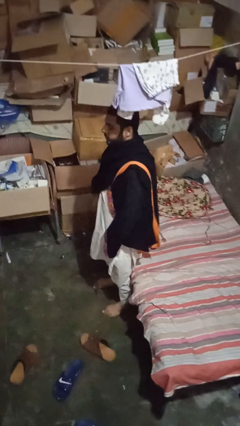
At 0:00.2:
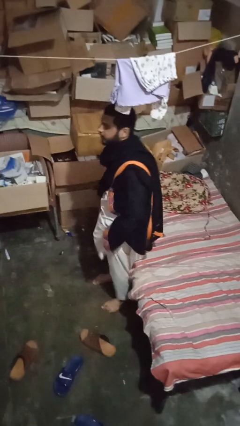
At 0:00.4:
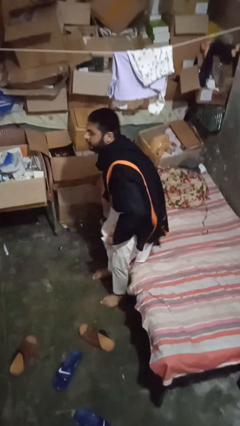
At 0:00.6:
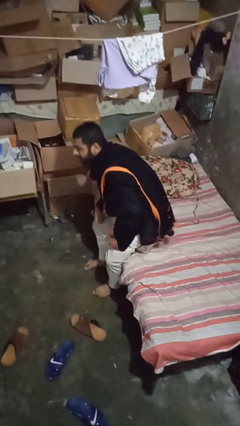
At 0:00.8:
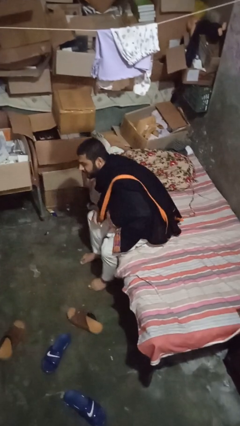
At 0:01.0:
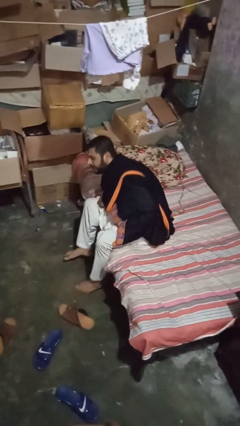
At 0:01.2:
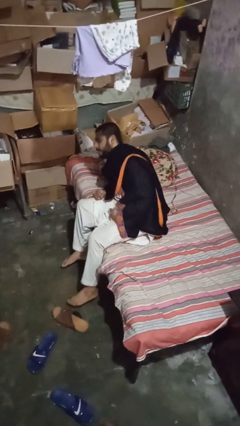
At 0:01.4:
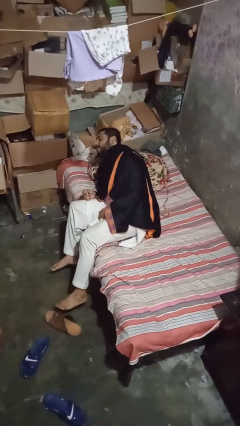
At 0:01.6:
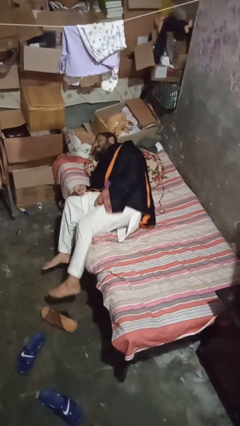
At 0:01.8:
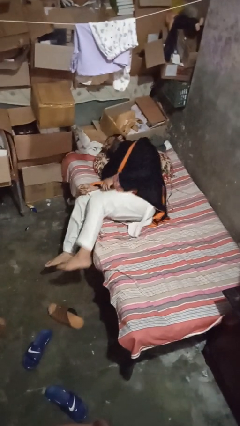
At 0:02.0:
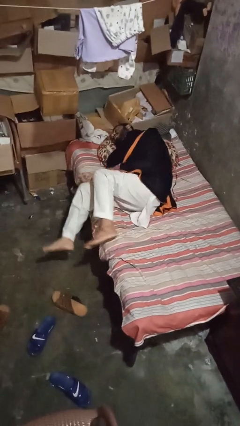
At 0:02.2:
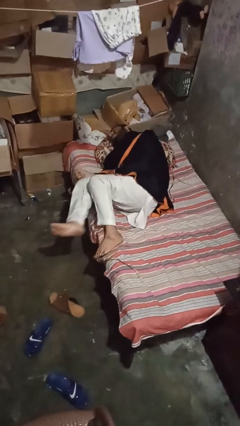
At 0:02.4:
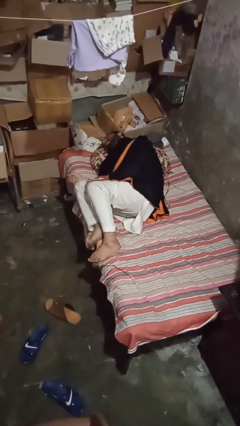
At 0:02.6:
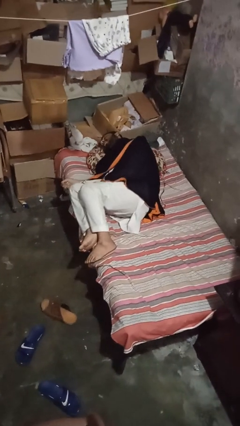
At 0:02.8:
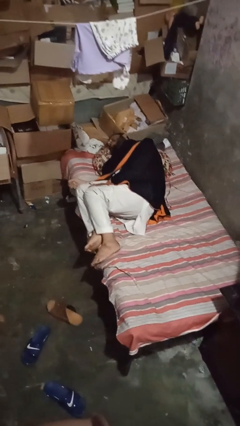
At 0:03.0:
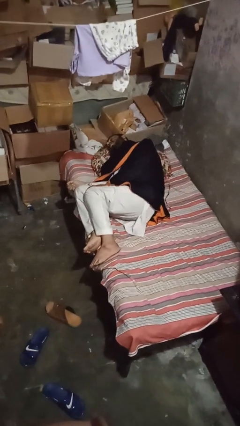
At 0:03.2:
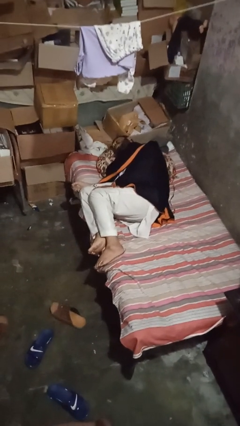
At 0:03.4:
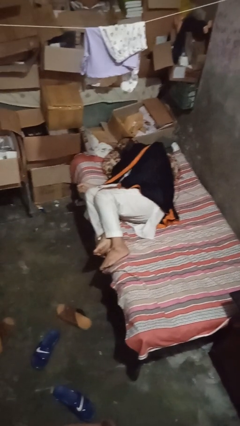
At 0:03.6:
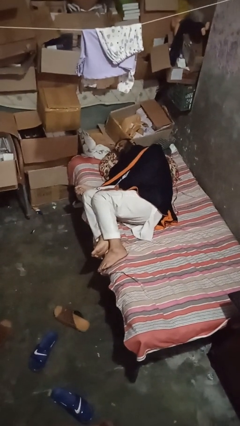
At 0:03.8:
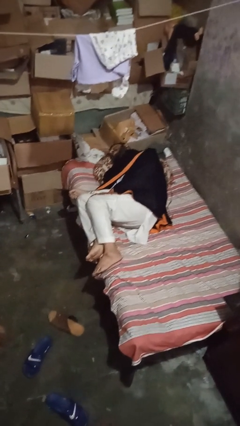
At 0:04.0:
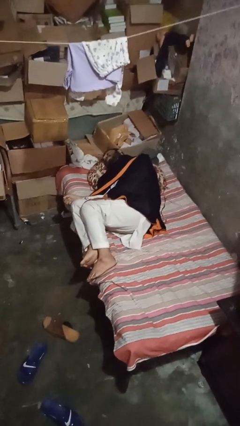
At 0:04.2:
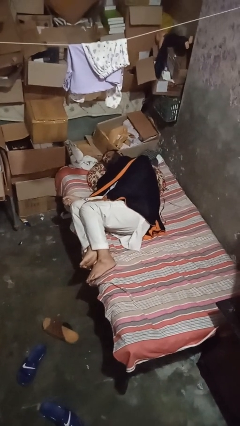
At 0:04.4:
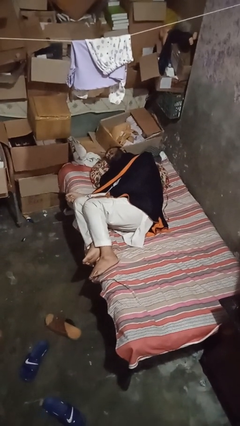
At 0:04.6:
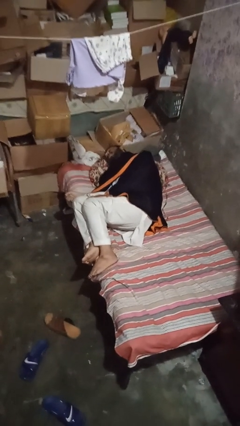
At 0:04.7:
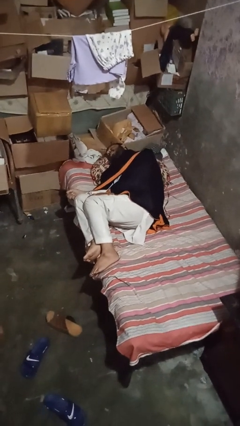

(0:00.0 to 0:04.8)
person lies down on bed

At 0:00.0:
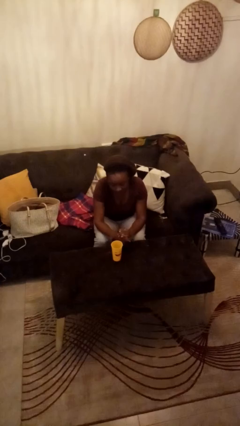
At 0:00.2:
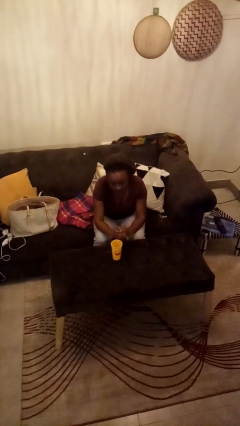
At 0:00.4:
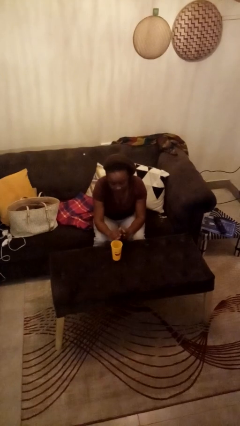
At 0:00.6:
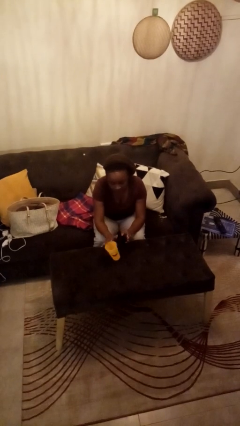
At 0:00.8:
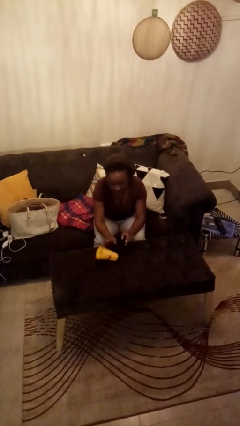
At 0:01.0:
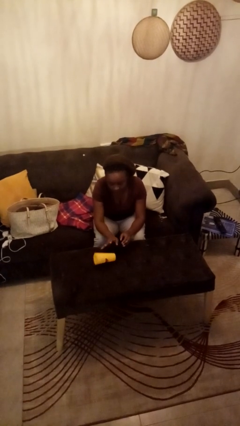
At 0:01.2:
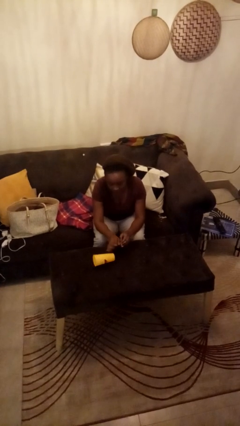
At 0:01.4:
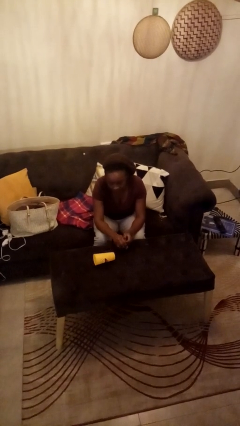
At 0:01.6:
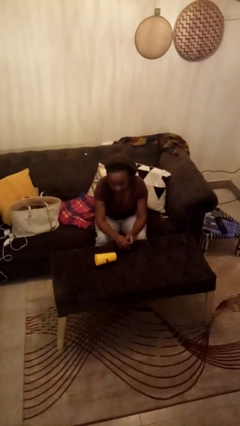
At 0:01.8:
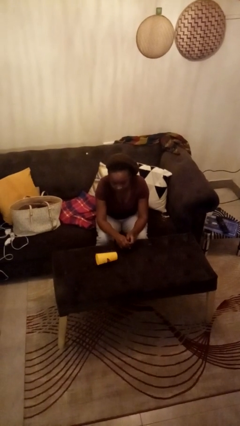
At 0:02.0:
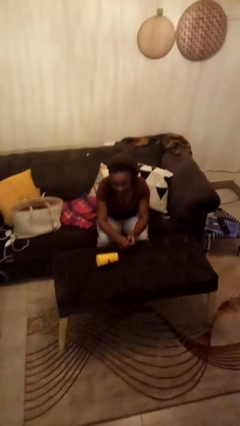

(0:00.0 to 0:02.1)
person knocks over glass

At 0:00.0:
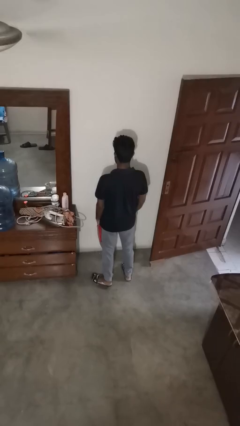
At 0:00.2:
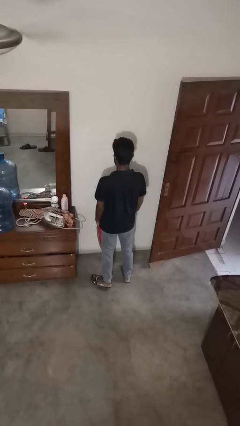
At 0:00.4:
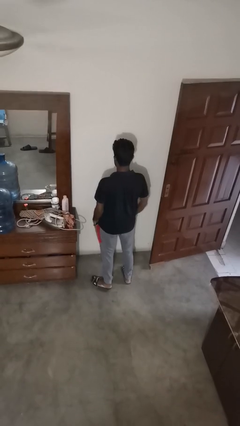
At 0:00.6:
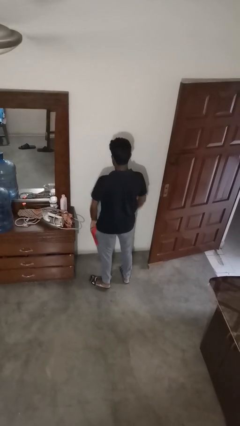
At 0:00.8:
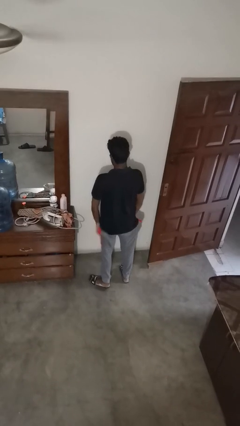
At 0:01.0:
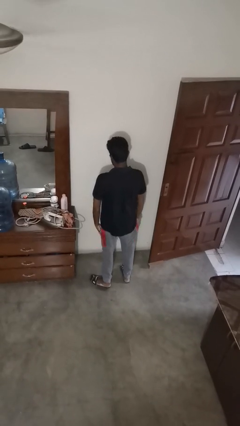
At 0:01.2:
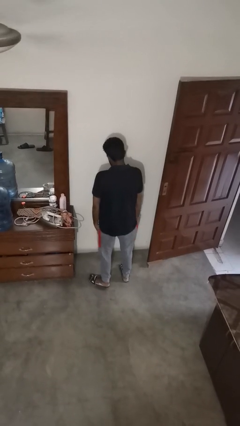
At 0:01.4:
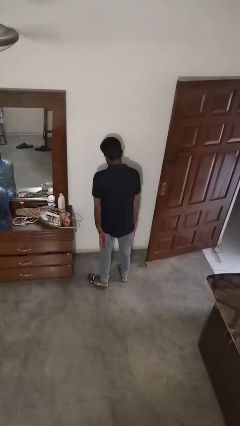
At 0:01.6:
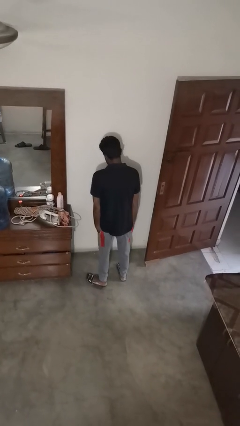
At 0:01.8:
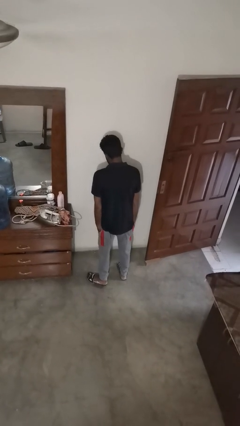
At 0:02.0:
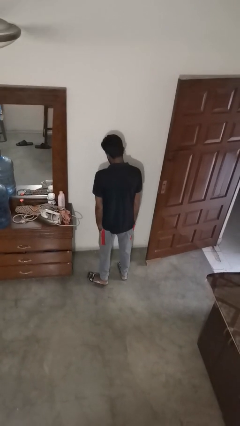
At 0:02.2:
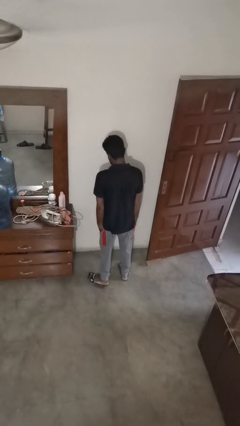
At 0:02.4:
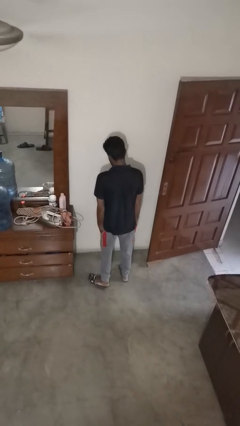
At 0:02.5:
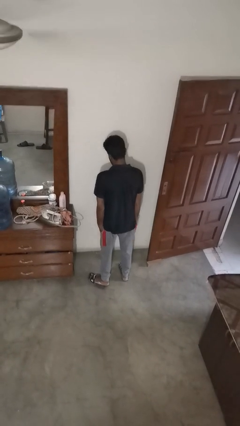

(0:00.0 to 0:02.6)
person puts hands in back pockets

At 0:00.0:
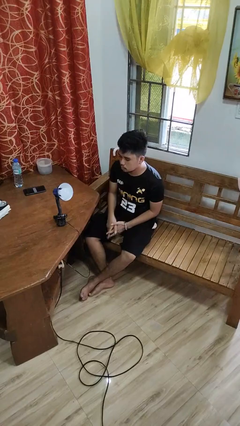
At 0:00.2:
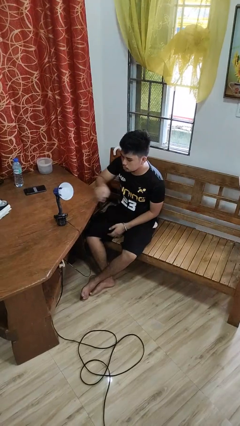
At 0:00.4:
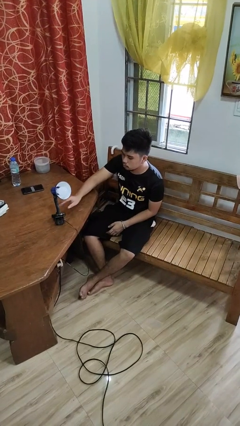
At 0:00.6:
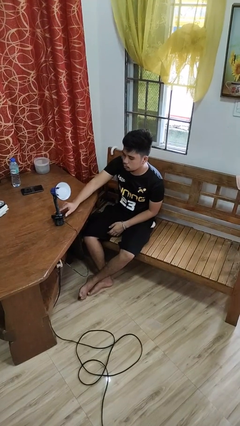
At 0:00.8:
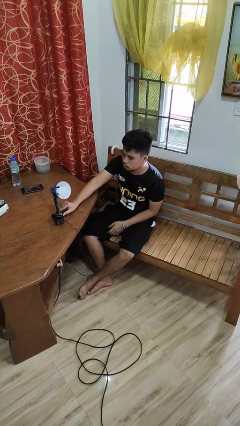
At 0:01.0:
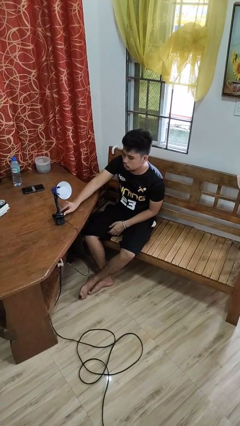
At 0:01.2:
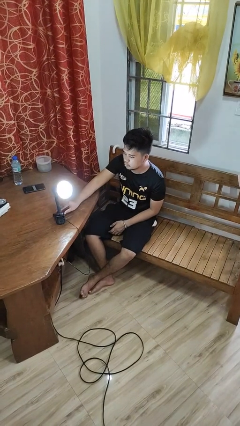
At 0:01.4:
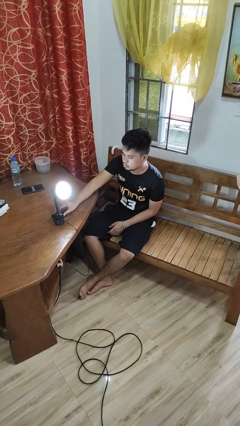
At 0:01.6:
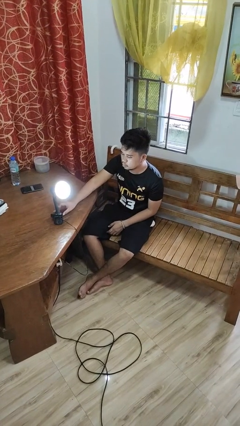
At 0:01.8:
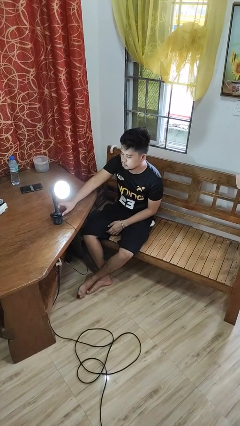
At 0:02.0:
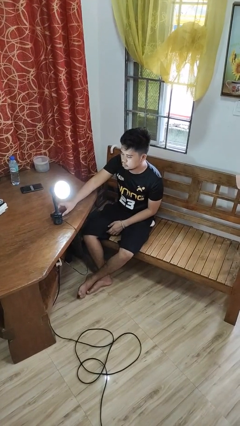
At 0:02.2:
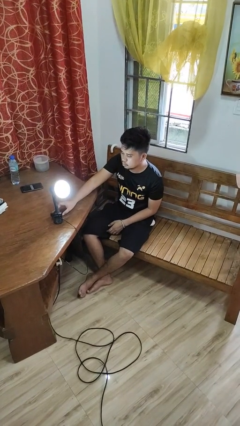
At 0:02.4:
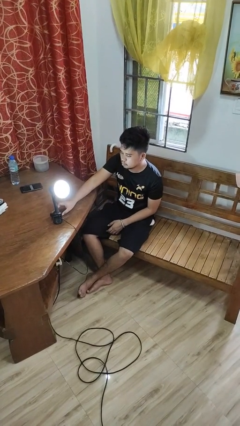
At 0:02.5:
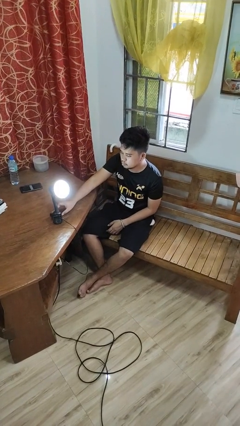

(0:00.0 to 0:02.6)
person turns on lamp

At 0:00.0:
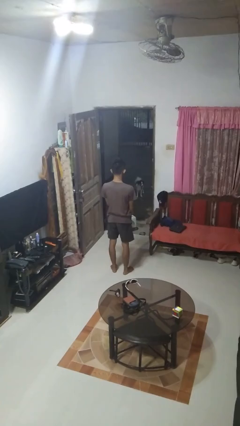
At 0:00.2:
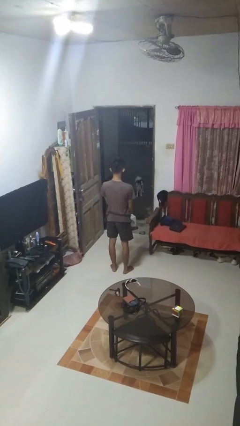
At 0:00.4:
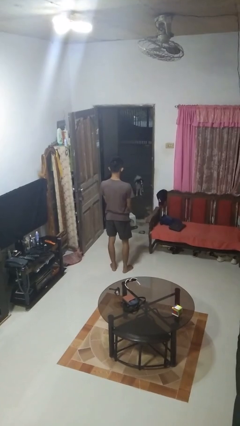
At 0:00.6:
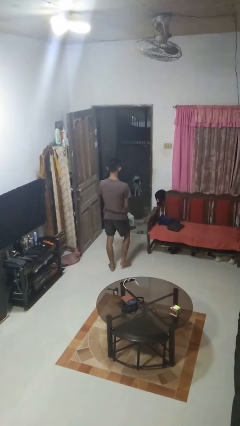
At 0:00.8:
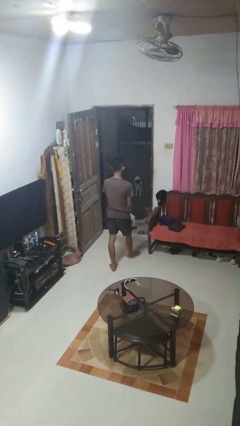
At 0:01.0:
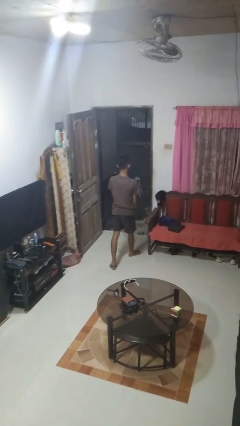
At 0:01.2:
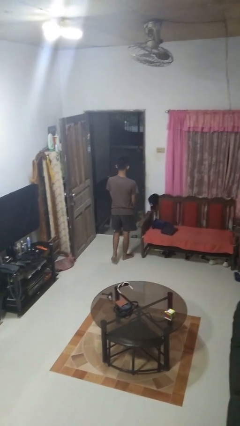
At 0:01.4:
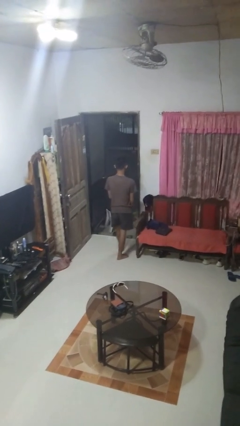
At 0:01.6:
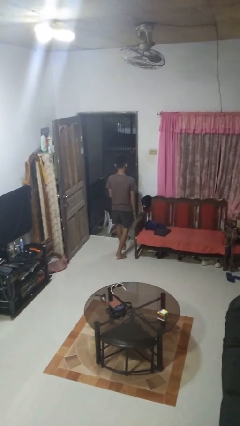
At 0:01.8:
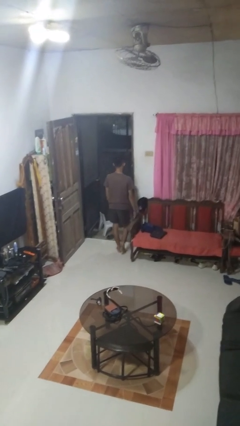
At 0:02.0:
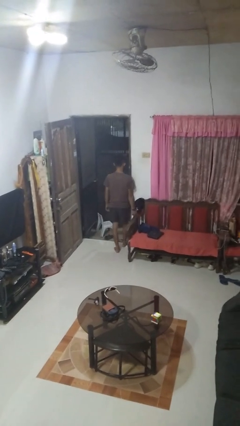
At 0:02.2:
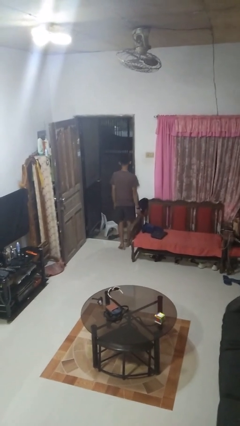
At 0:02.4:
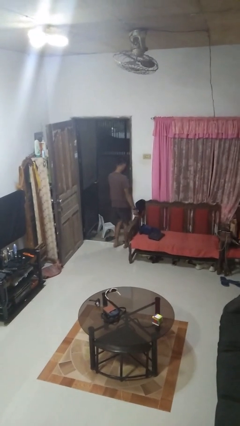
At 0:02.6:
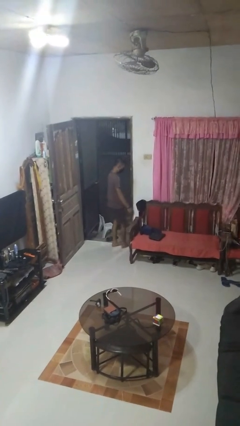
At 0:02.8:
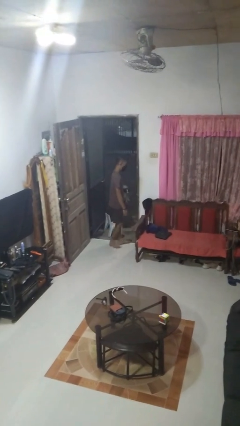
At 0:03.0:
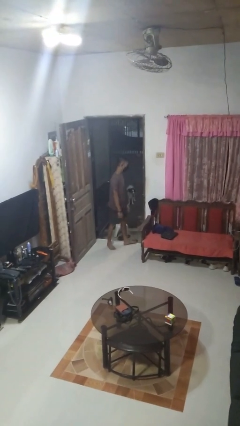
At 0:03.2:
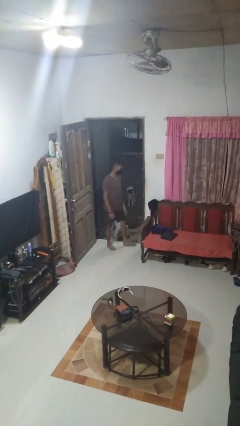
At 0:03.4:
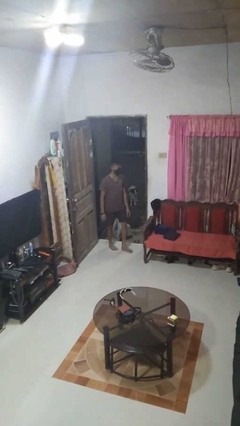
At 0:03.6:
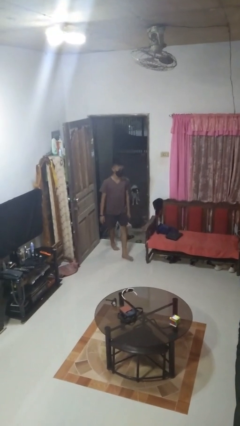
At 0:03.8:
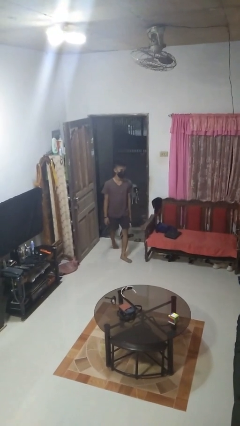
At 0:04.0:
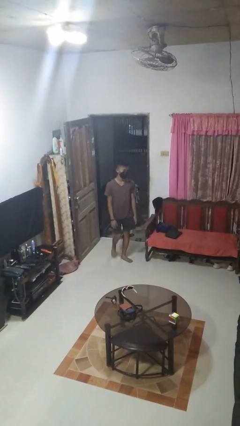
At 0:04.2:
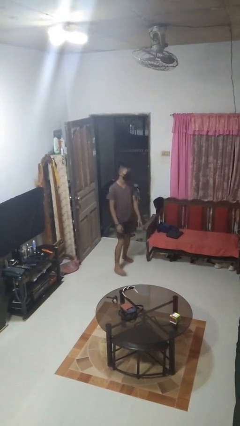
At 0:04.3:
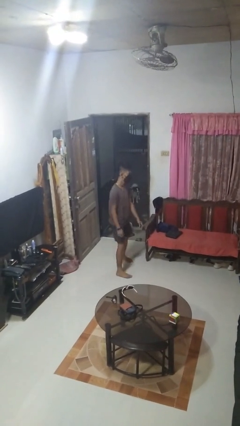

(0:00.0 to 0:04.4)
person bumps into wall

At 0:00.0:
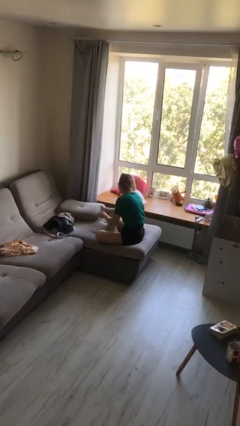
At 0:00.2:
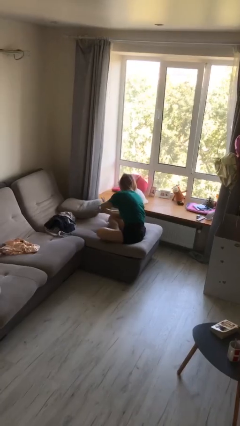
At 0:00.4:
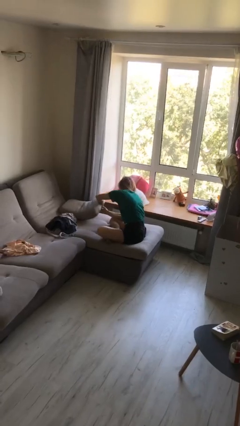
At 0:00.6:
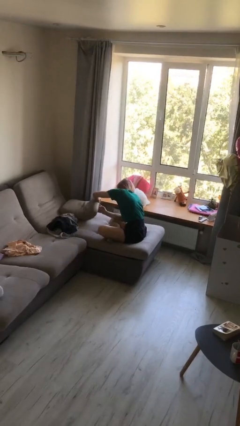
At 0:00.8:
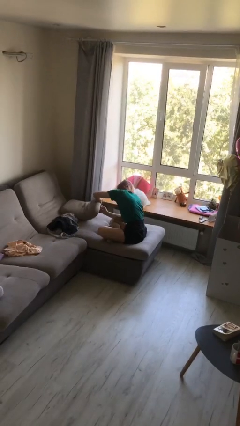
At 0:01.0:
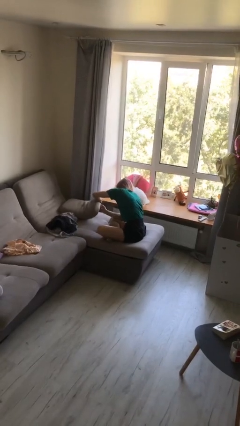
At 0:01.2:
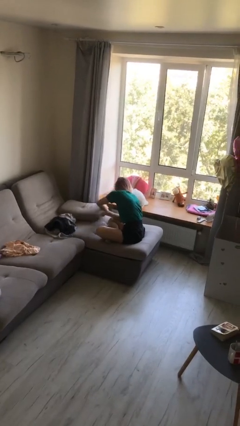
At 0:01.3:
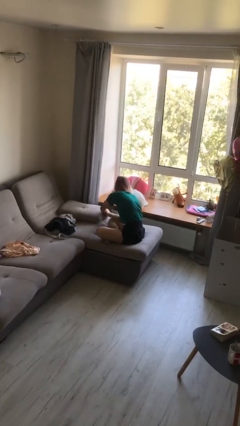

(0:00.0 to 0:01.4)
person searches in couch
